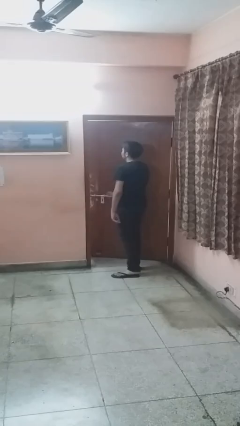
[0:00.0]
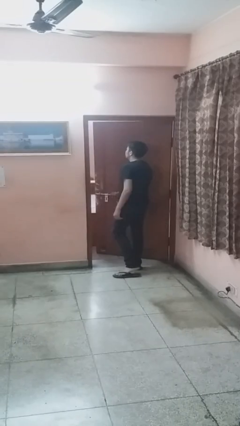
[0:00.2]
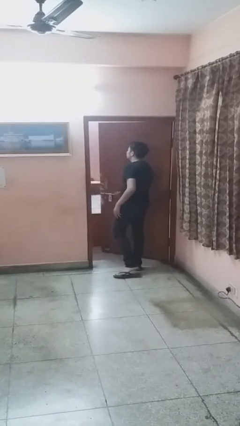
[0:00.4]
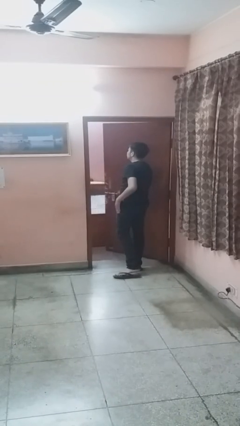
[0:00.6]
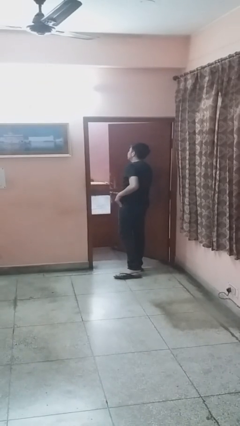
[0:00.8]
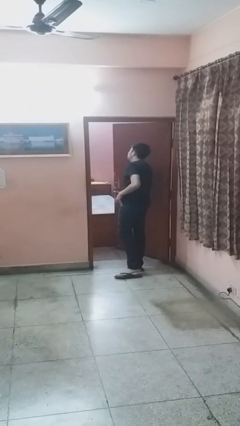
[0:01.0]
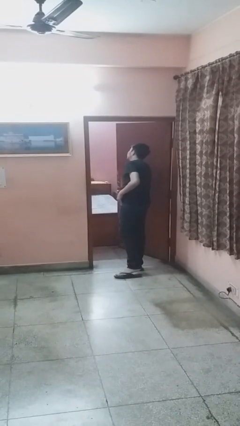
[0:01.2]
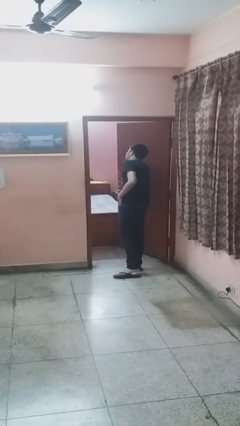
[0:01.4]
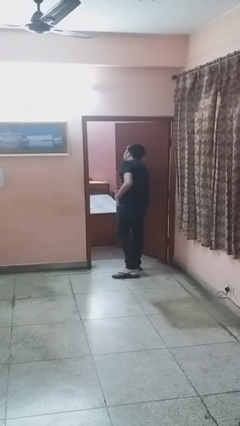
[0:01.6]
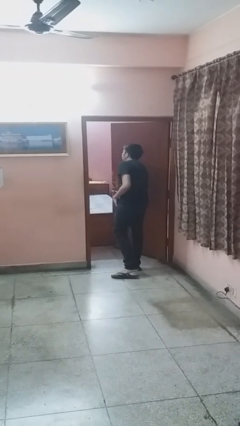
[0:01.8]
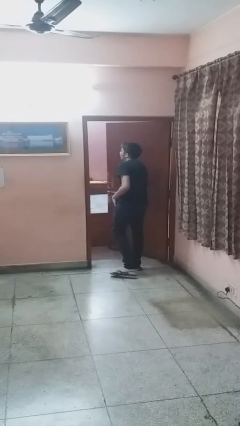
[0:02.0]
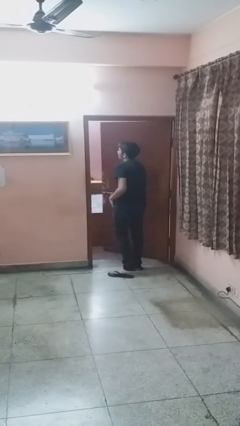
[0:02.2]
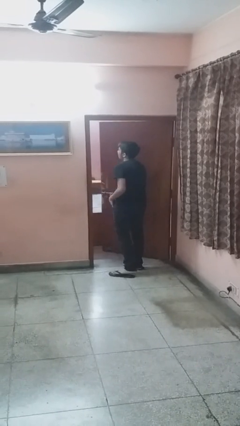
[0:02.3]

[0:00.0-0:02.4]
person opens facility door

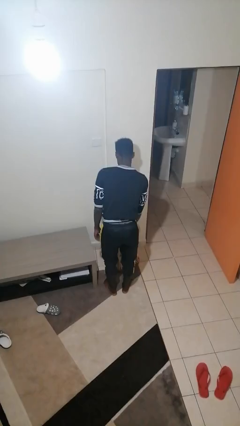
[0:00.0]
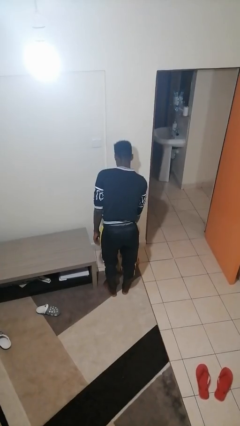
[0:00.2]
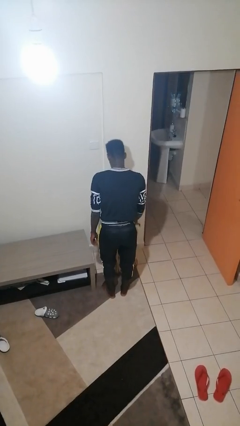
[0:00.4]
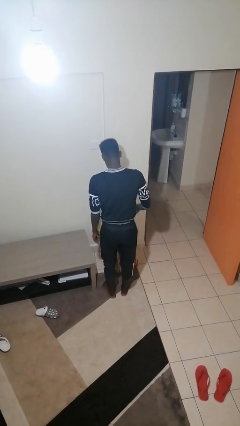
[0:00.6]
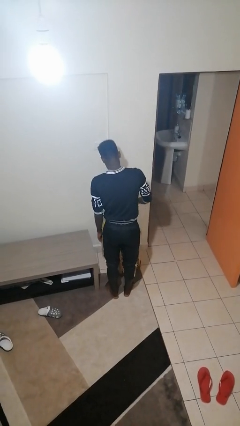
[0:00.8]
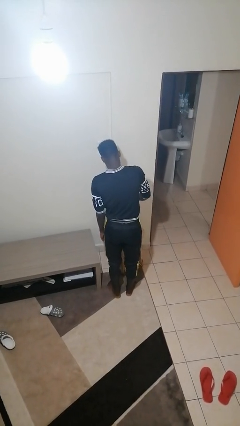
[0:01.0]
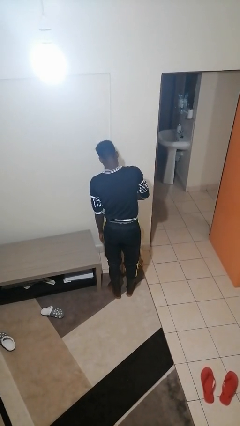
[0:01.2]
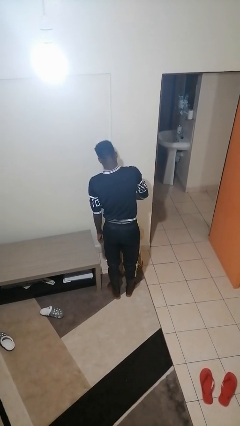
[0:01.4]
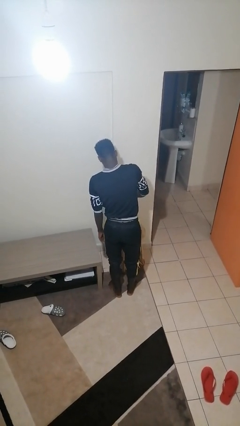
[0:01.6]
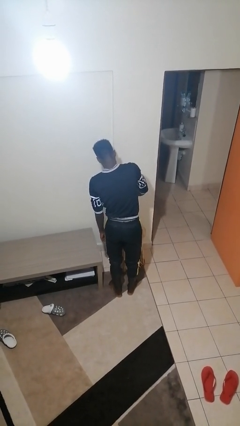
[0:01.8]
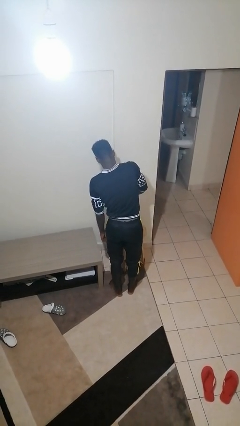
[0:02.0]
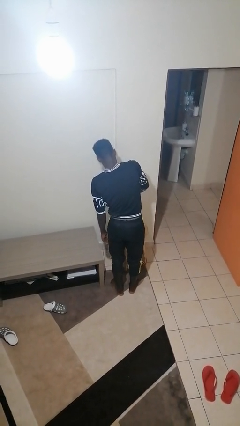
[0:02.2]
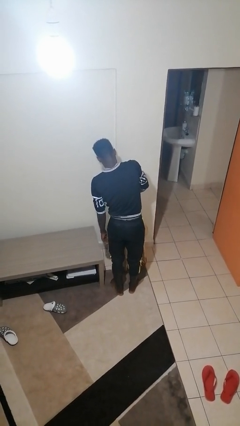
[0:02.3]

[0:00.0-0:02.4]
person waters houseplant

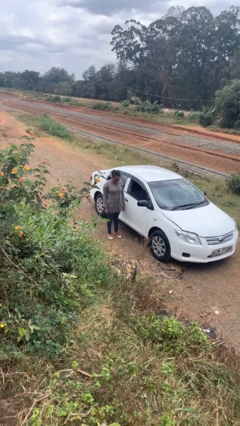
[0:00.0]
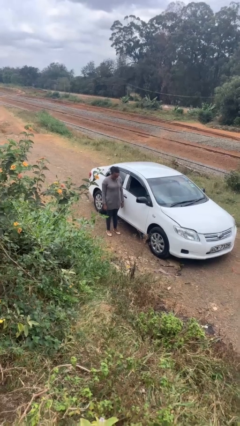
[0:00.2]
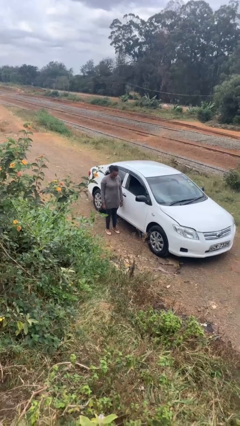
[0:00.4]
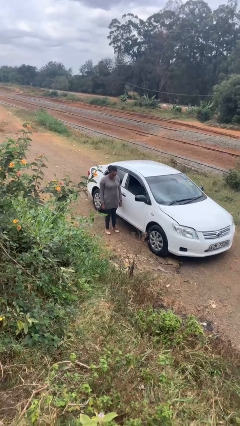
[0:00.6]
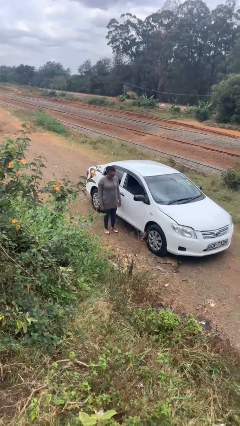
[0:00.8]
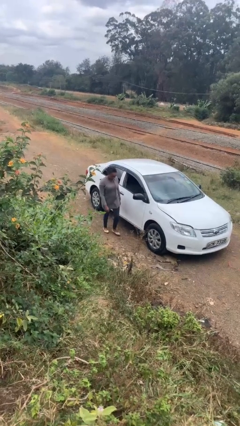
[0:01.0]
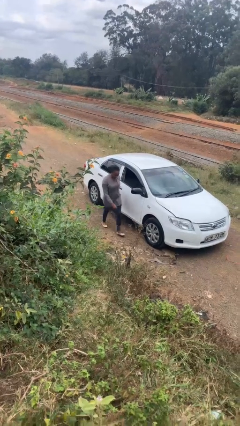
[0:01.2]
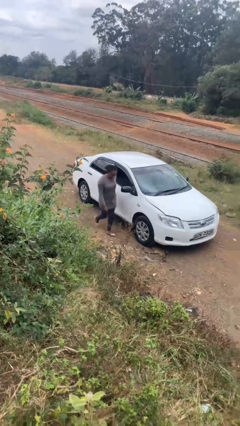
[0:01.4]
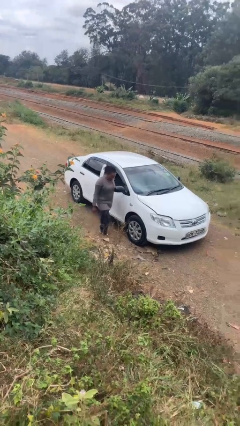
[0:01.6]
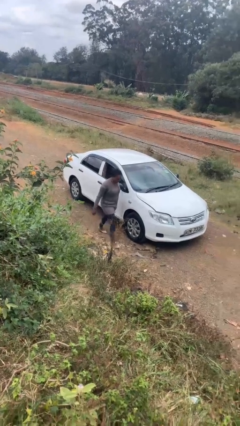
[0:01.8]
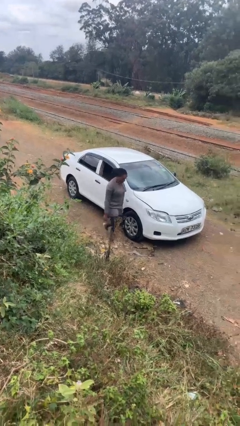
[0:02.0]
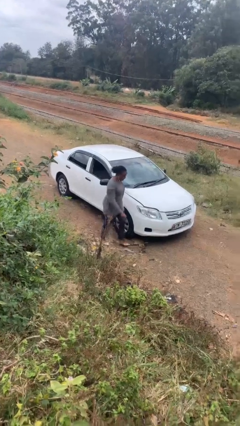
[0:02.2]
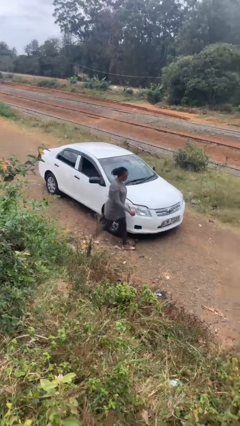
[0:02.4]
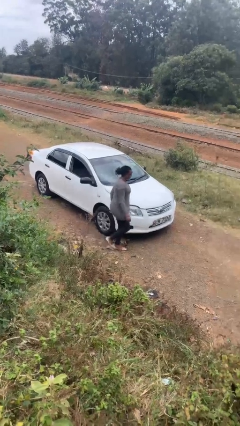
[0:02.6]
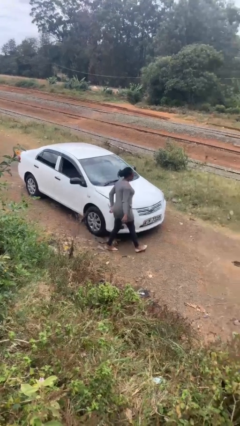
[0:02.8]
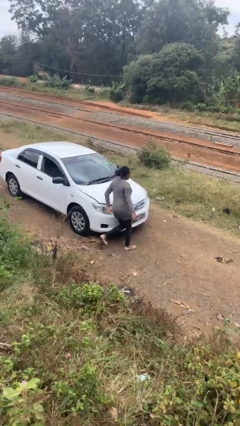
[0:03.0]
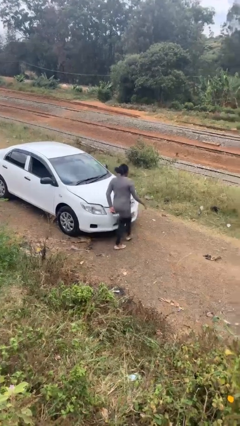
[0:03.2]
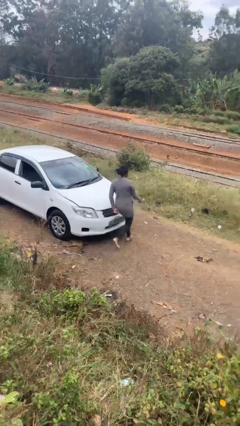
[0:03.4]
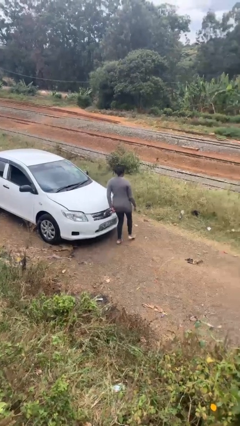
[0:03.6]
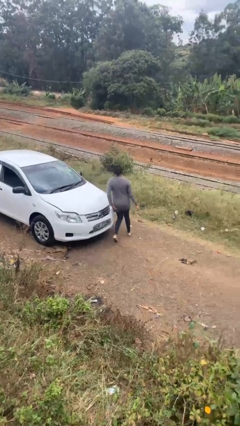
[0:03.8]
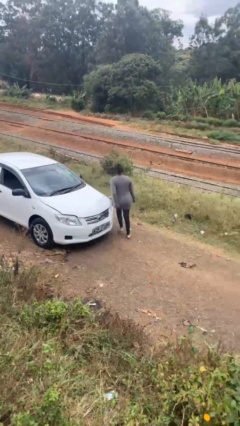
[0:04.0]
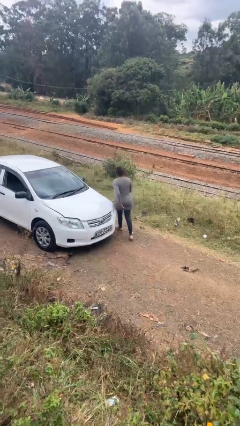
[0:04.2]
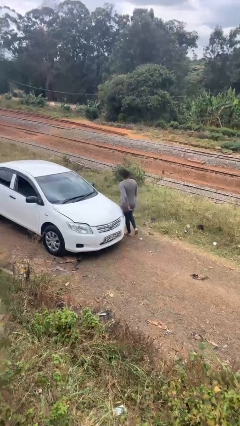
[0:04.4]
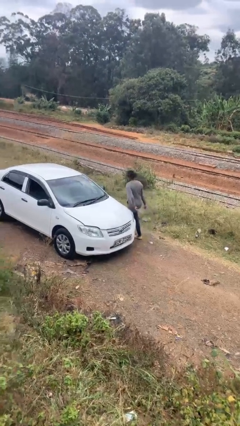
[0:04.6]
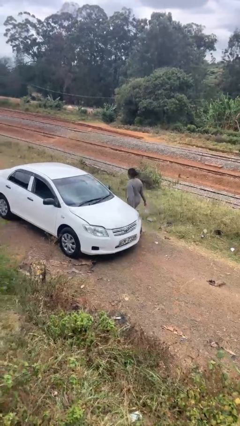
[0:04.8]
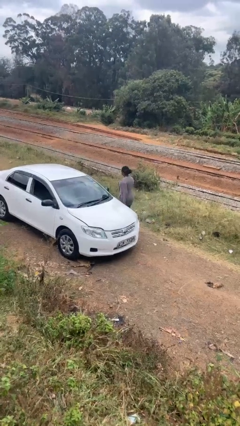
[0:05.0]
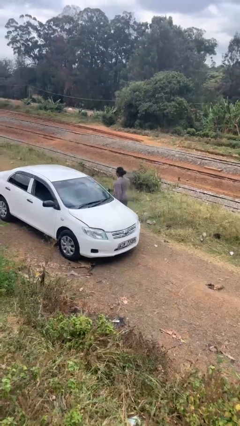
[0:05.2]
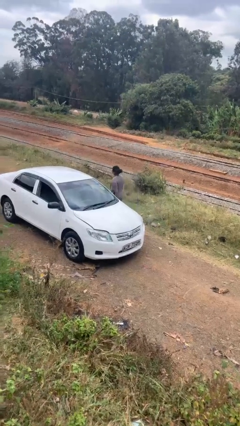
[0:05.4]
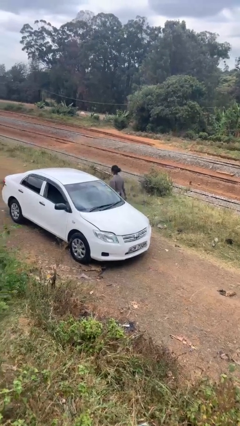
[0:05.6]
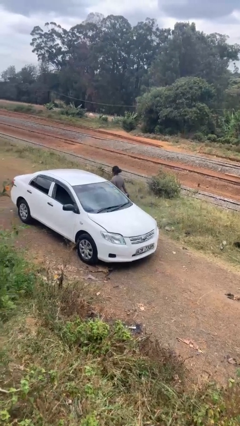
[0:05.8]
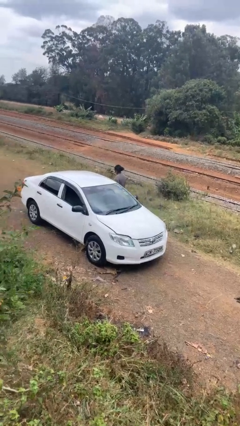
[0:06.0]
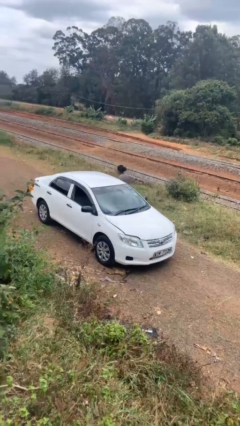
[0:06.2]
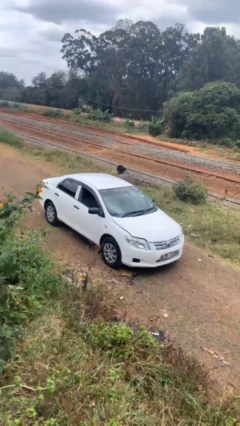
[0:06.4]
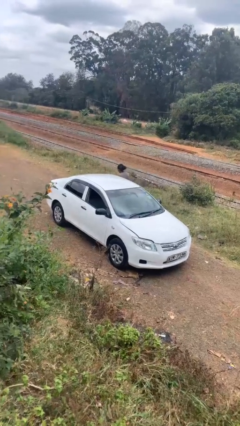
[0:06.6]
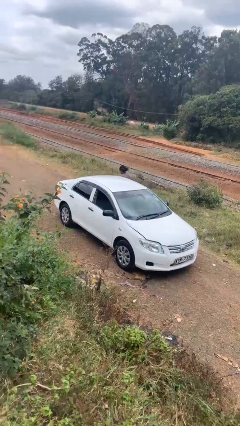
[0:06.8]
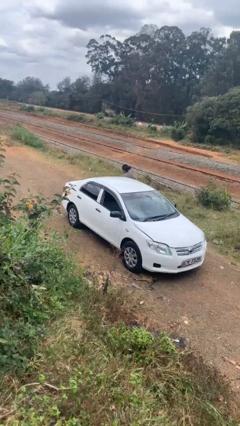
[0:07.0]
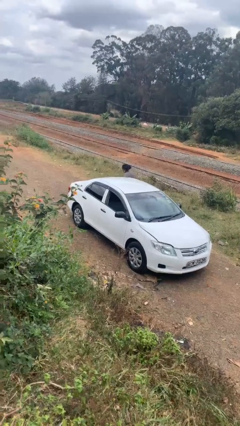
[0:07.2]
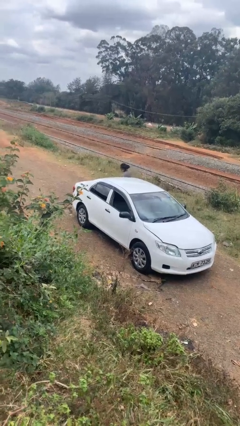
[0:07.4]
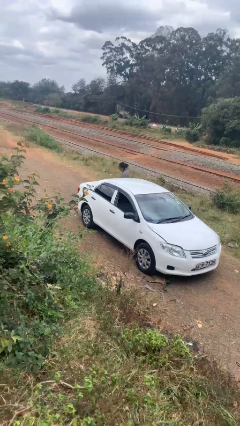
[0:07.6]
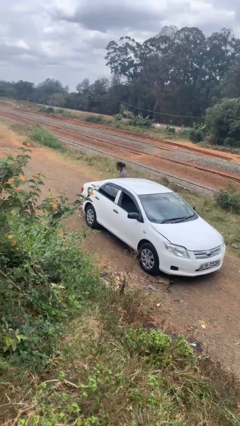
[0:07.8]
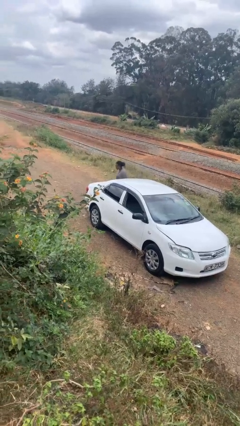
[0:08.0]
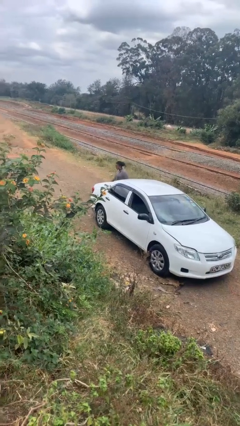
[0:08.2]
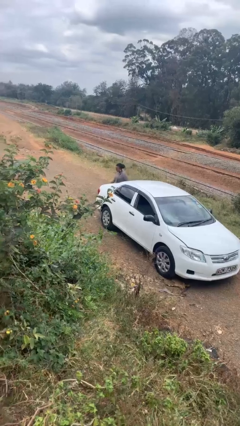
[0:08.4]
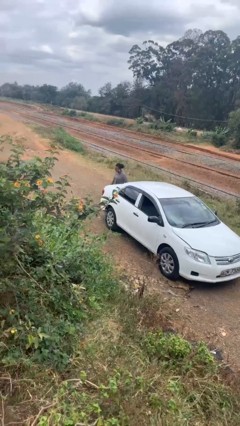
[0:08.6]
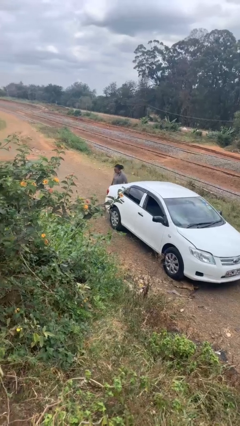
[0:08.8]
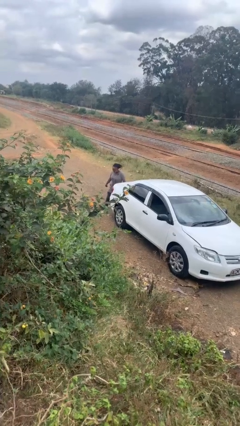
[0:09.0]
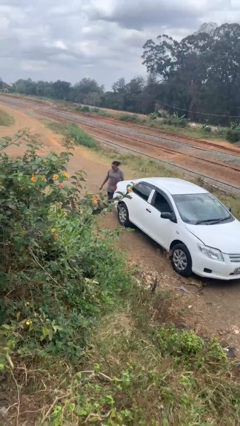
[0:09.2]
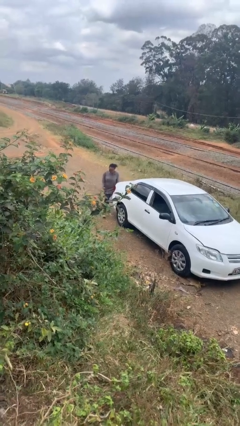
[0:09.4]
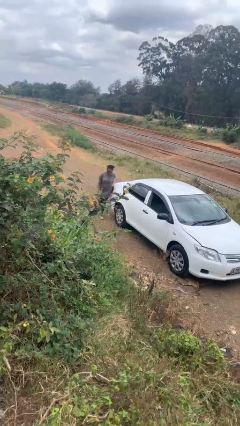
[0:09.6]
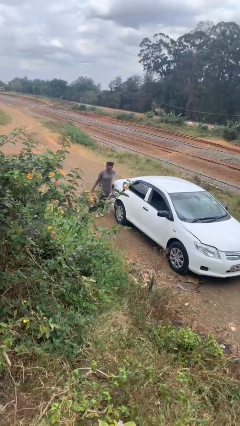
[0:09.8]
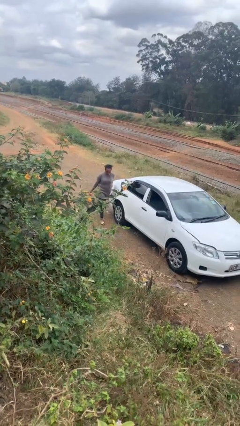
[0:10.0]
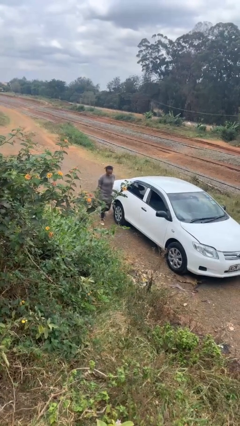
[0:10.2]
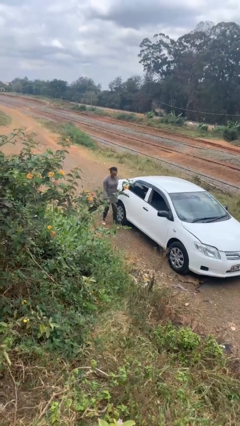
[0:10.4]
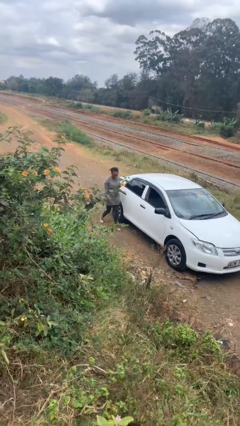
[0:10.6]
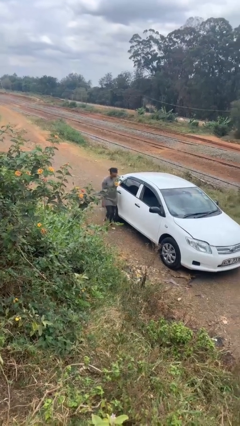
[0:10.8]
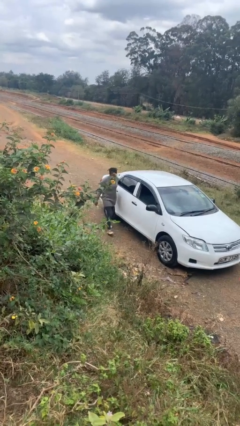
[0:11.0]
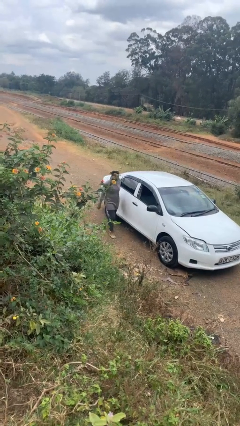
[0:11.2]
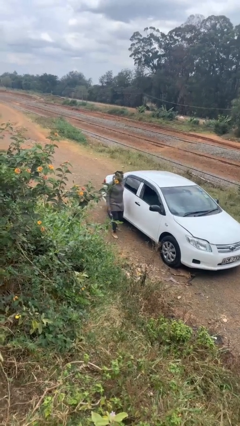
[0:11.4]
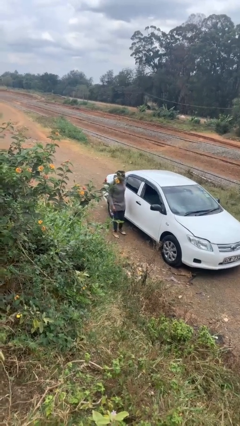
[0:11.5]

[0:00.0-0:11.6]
person walks around car

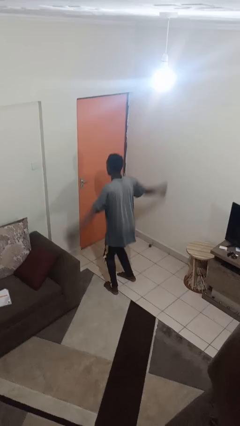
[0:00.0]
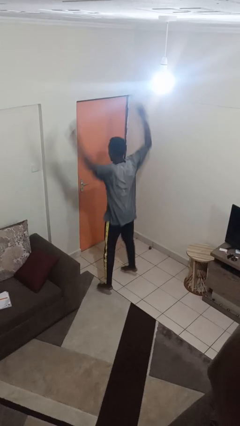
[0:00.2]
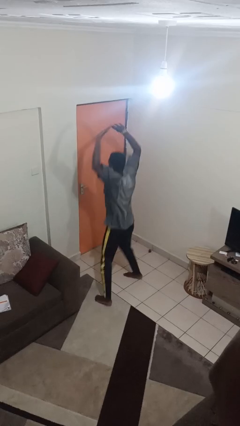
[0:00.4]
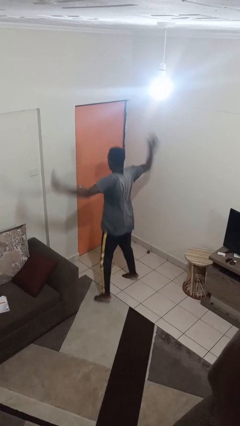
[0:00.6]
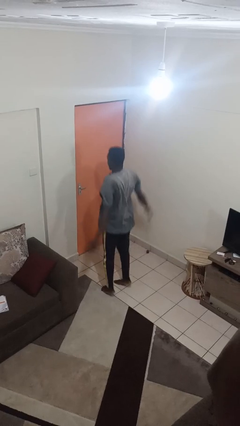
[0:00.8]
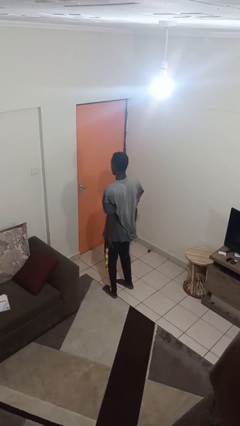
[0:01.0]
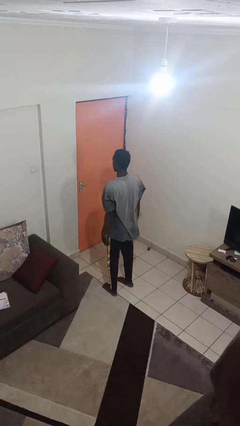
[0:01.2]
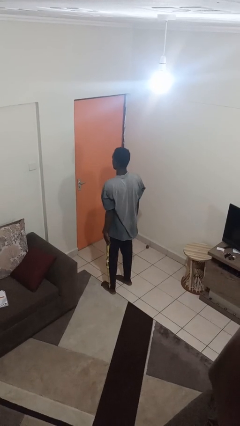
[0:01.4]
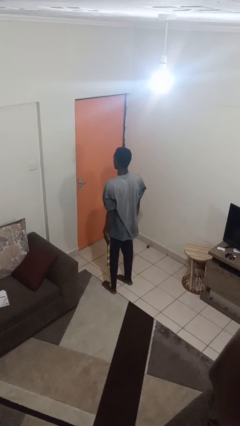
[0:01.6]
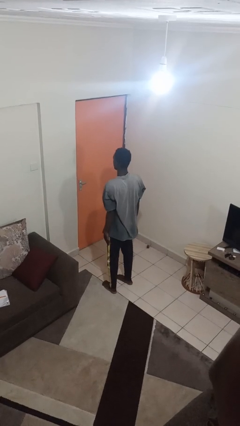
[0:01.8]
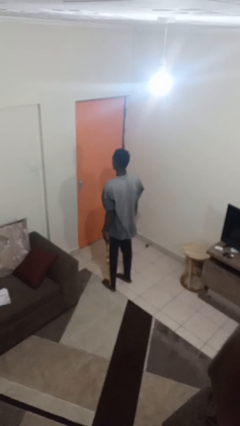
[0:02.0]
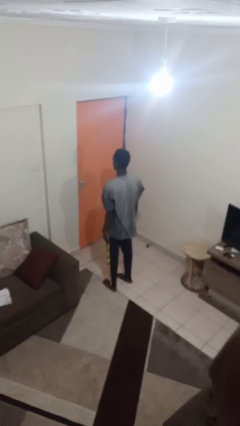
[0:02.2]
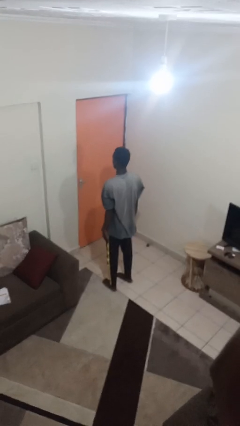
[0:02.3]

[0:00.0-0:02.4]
person exercises with jumping jacks
